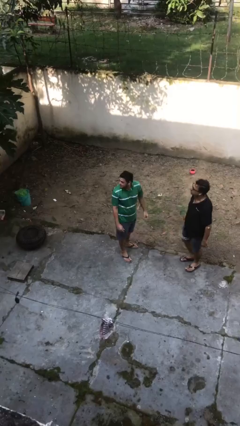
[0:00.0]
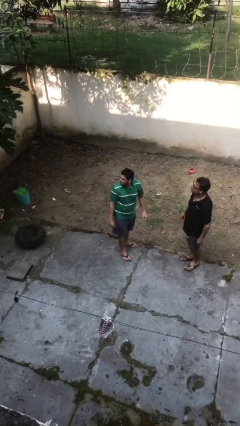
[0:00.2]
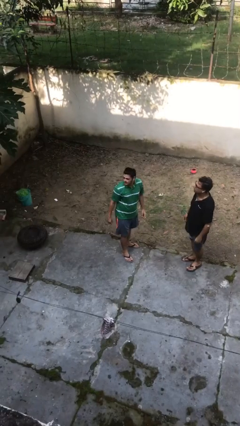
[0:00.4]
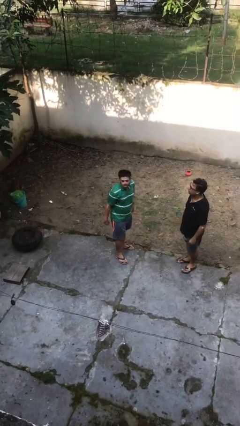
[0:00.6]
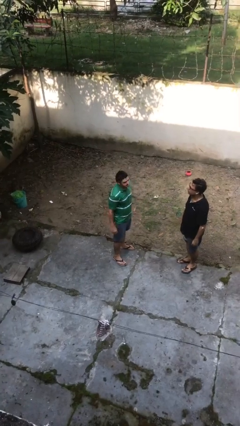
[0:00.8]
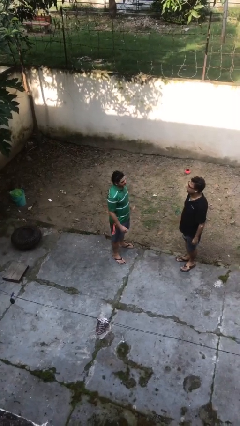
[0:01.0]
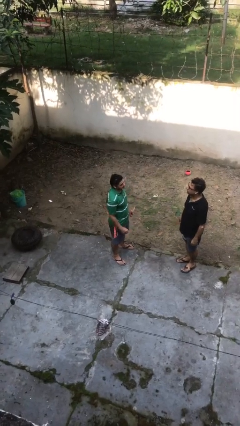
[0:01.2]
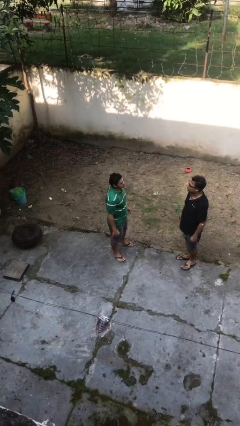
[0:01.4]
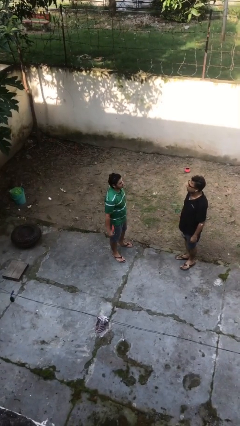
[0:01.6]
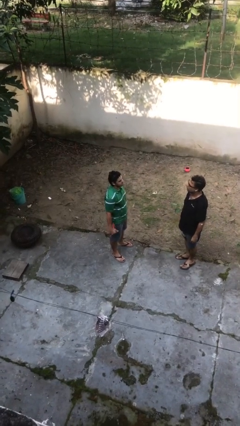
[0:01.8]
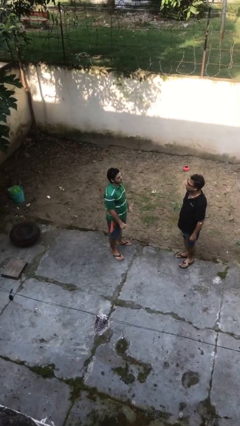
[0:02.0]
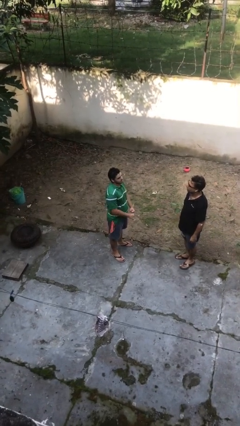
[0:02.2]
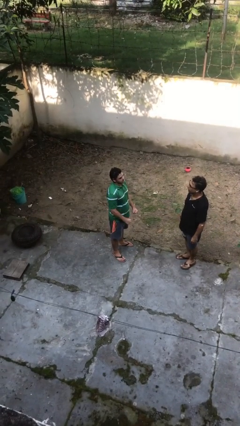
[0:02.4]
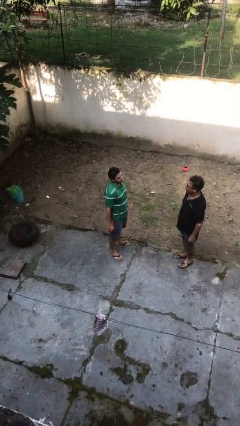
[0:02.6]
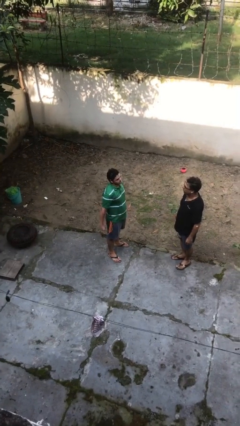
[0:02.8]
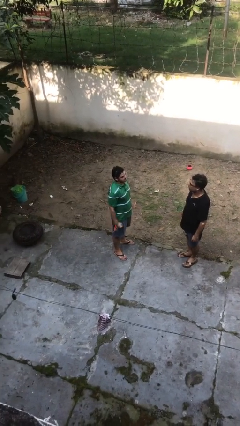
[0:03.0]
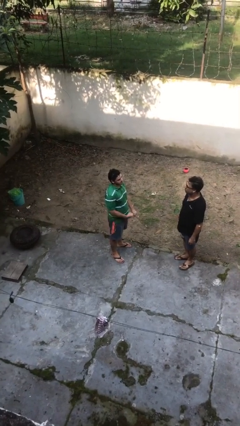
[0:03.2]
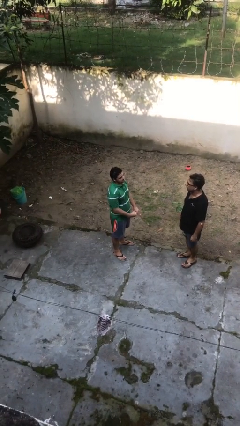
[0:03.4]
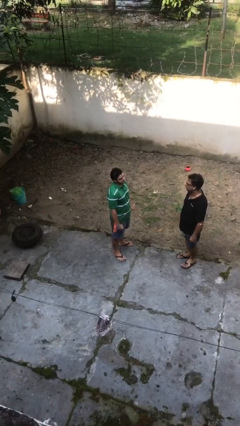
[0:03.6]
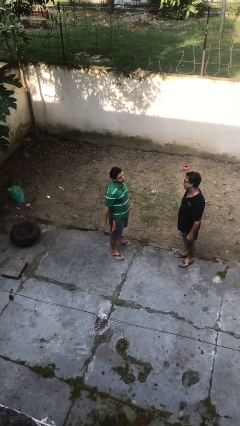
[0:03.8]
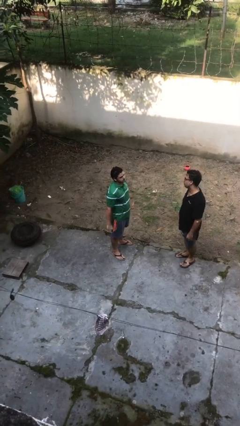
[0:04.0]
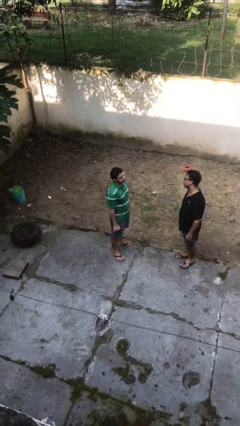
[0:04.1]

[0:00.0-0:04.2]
person talks to person

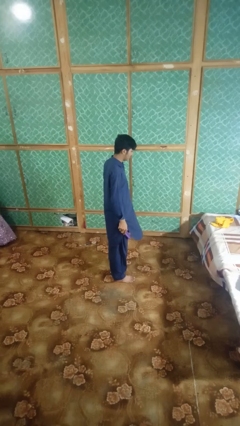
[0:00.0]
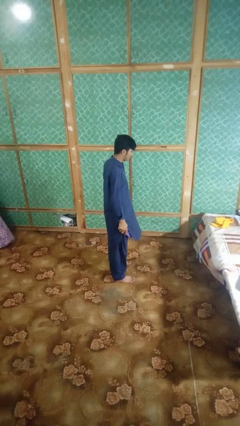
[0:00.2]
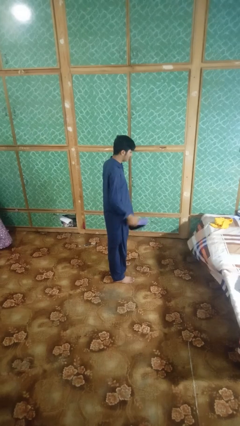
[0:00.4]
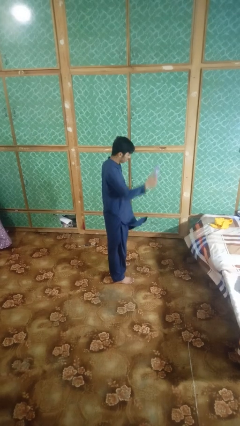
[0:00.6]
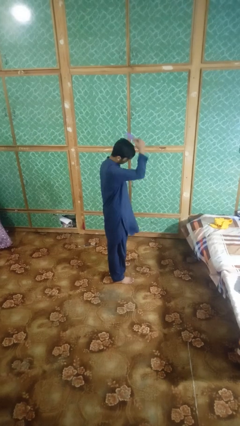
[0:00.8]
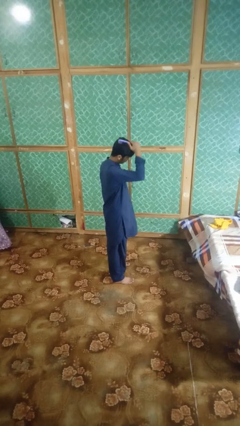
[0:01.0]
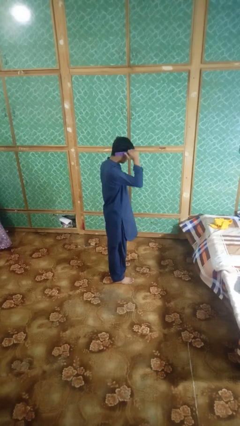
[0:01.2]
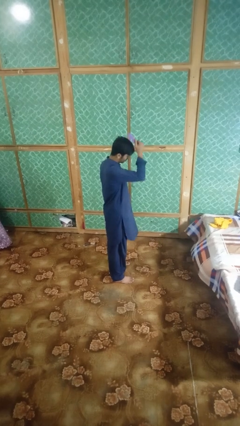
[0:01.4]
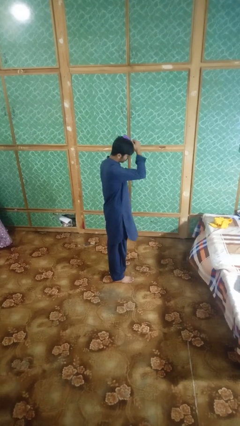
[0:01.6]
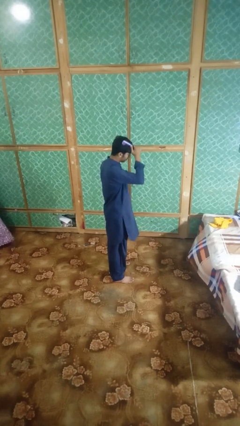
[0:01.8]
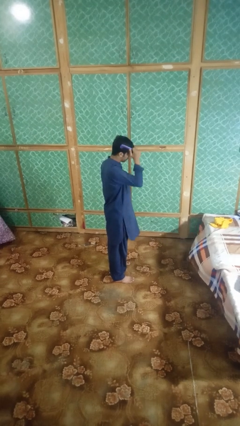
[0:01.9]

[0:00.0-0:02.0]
person brushes hair

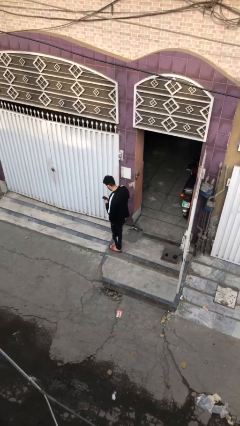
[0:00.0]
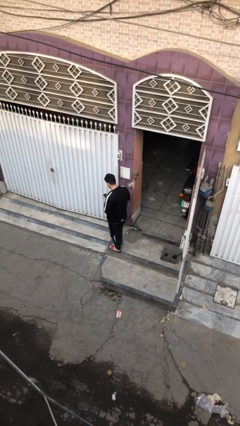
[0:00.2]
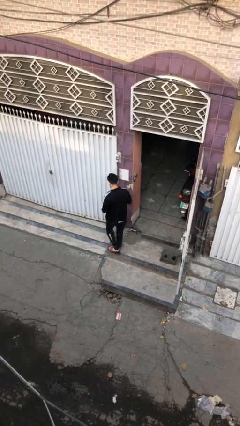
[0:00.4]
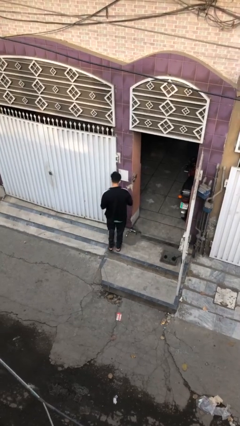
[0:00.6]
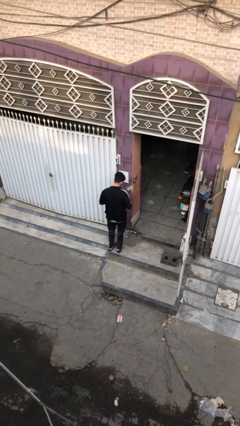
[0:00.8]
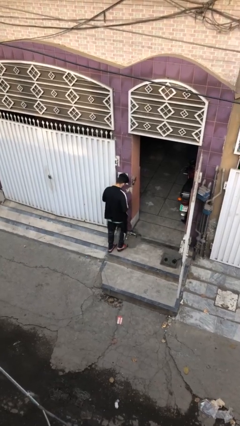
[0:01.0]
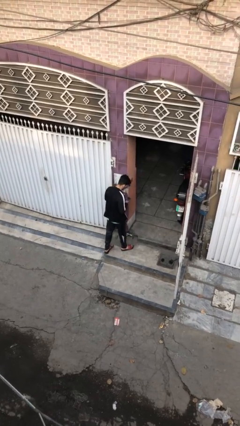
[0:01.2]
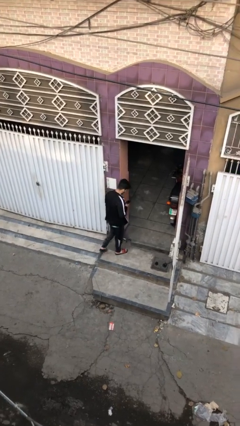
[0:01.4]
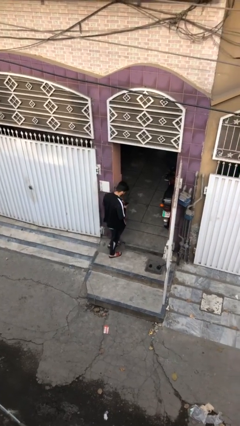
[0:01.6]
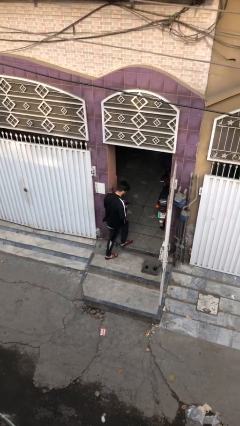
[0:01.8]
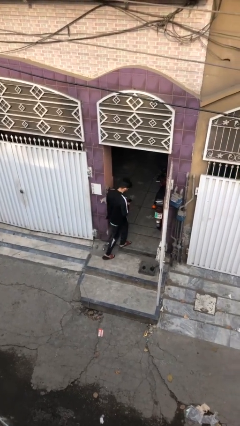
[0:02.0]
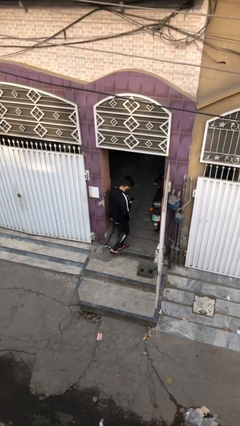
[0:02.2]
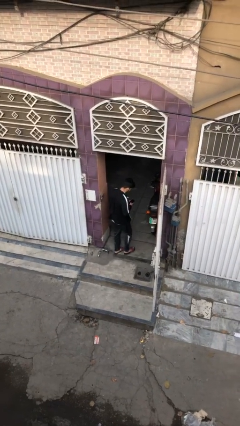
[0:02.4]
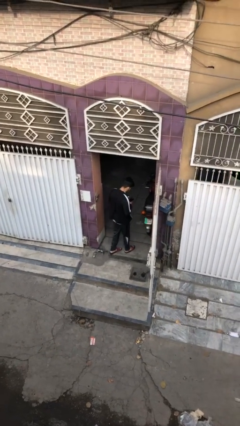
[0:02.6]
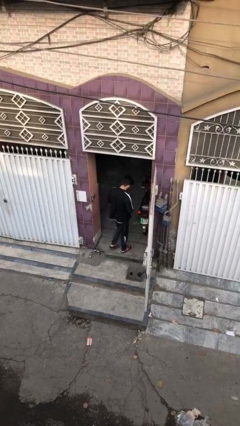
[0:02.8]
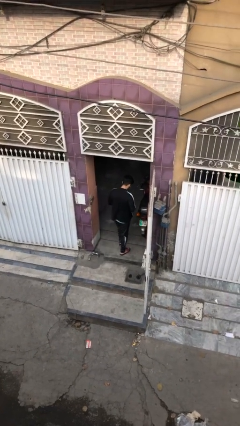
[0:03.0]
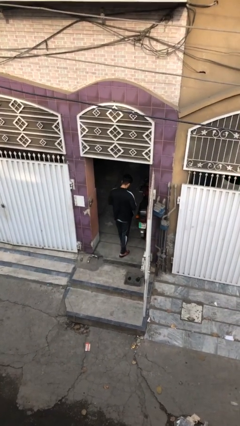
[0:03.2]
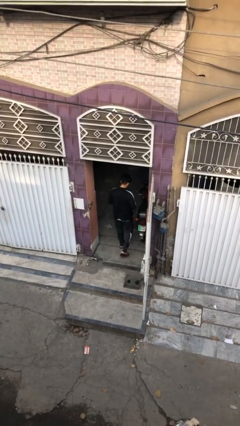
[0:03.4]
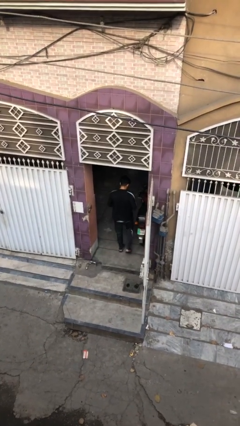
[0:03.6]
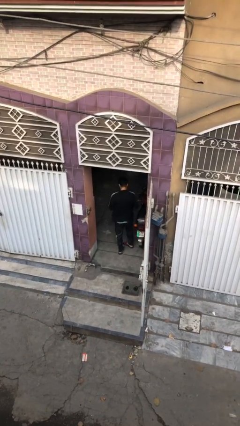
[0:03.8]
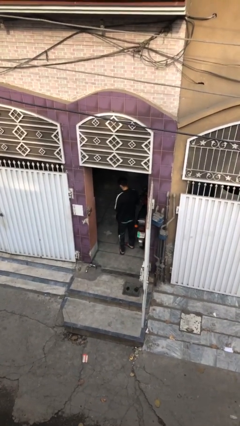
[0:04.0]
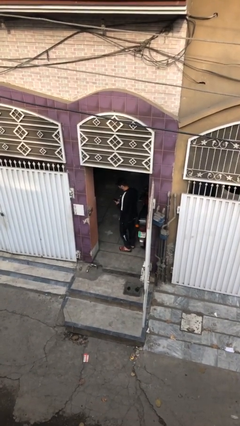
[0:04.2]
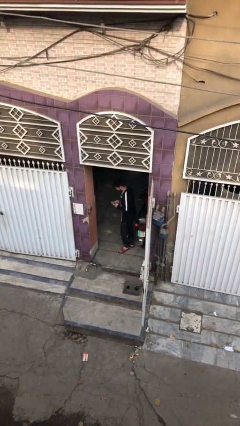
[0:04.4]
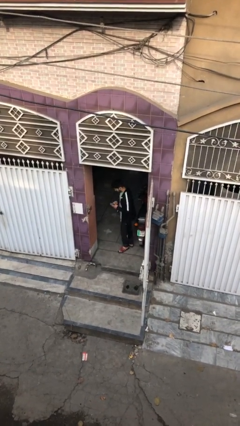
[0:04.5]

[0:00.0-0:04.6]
person exits scene through structure

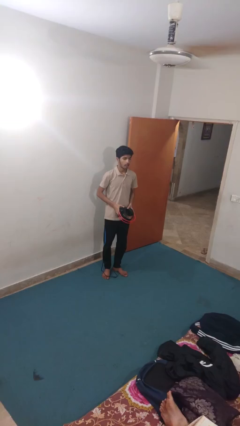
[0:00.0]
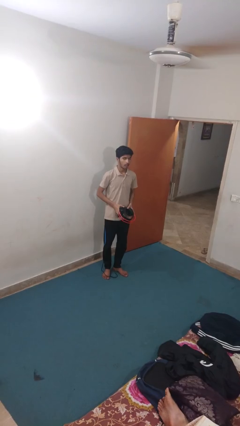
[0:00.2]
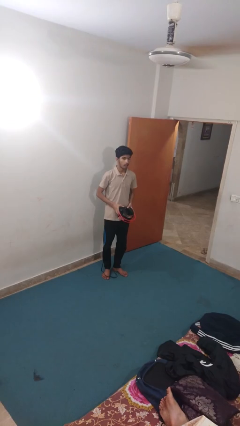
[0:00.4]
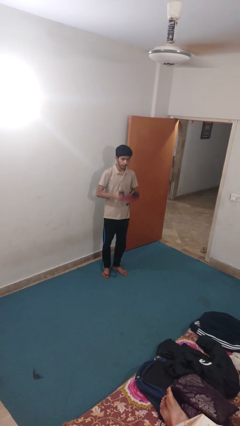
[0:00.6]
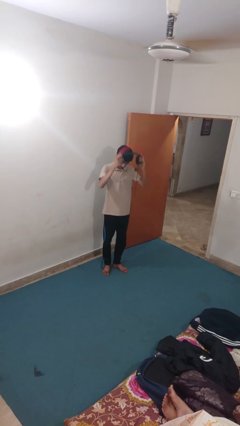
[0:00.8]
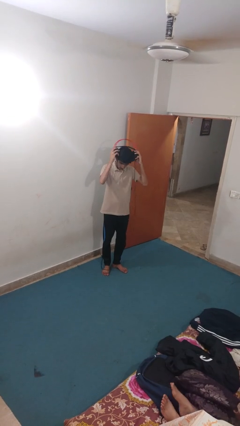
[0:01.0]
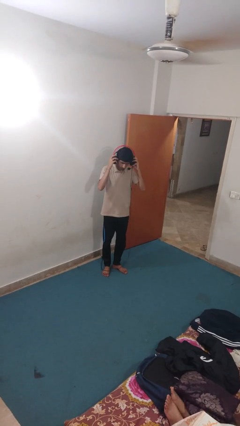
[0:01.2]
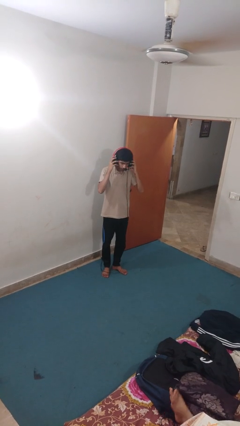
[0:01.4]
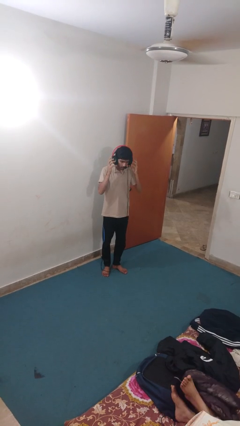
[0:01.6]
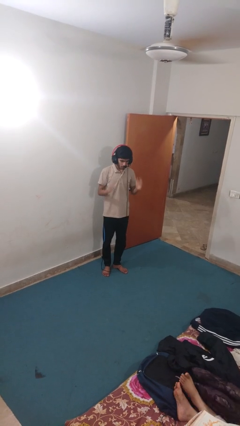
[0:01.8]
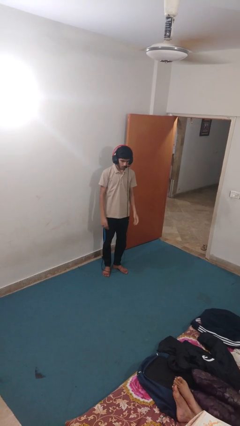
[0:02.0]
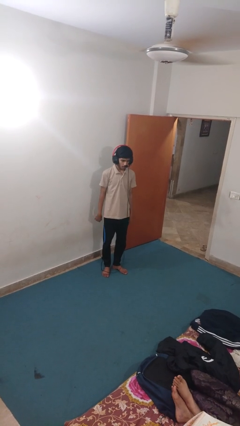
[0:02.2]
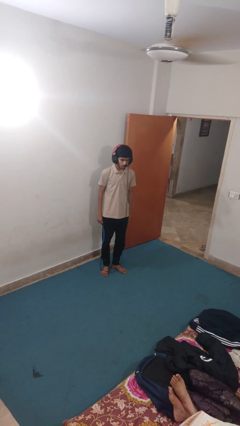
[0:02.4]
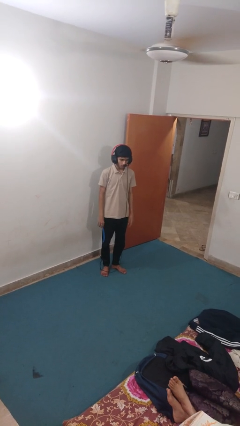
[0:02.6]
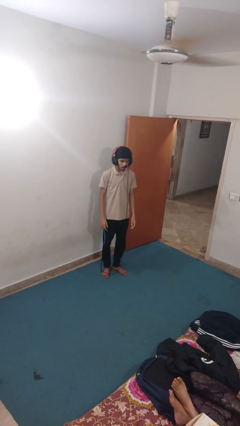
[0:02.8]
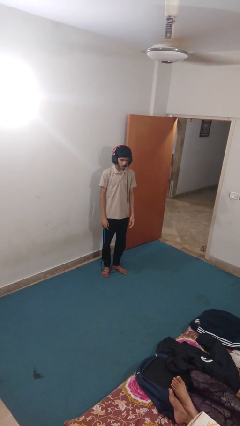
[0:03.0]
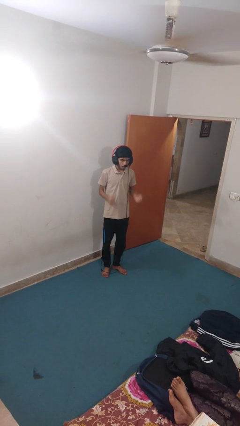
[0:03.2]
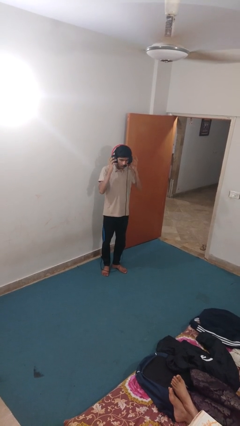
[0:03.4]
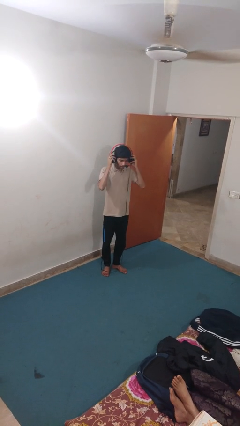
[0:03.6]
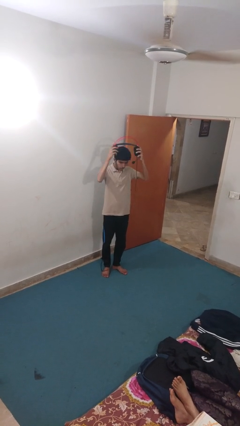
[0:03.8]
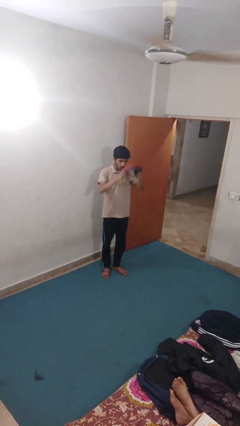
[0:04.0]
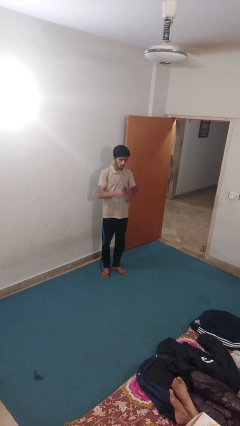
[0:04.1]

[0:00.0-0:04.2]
person puts on headphones

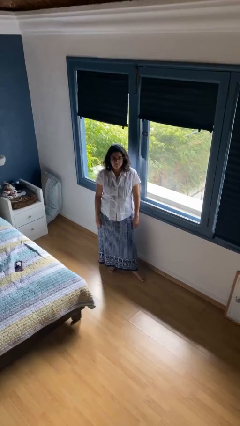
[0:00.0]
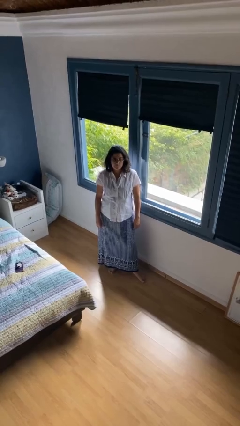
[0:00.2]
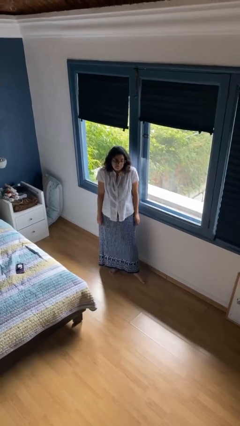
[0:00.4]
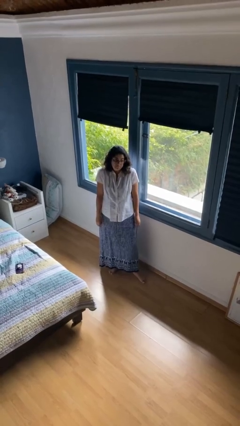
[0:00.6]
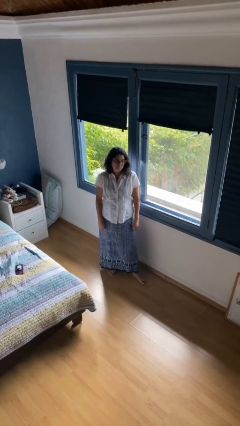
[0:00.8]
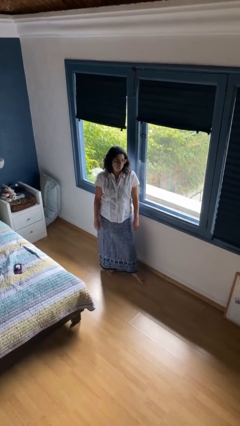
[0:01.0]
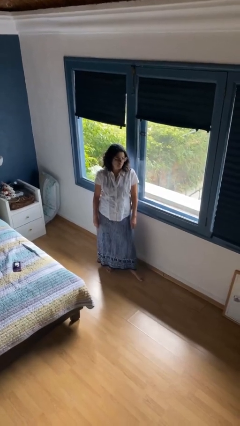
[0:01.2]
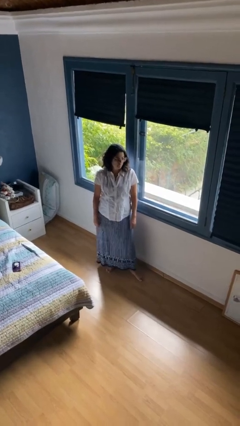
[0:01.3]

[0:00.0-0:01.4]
person shrugs

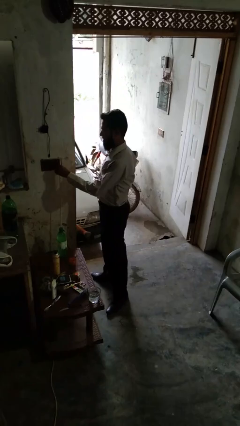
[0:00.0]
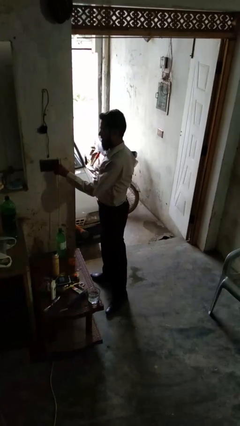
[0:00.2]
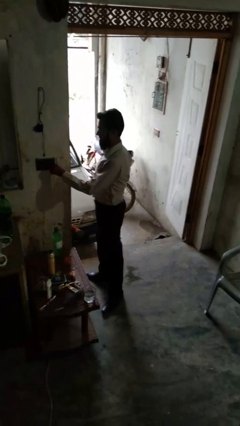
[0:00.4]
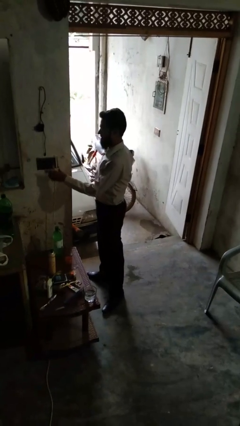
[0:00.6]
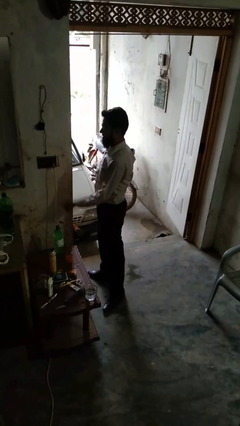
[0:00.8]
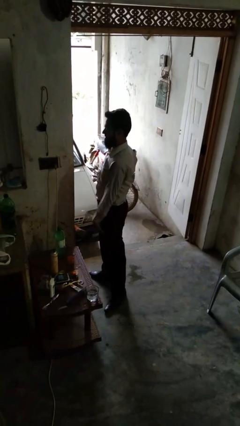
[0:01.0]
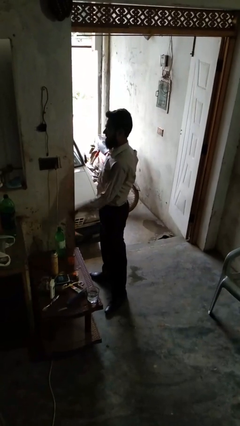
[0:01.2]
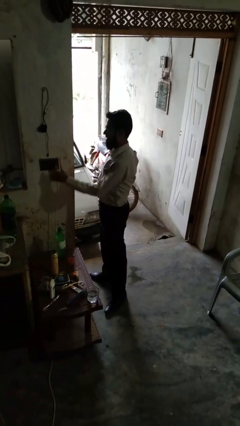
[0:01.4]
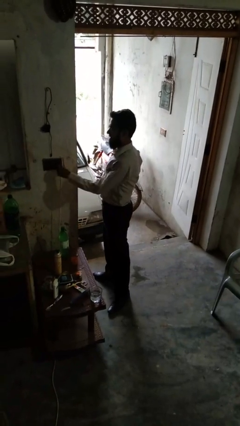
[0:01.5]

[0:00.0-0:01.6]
person unplugs from electrical socket
